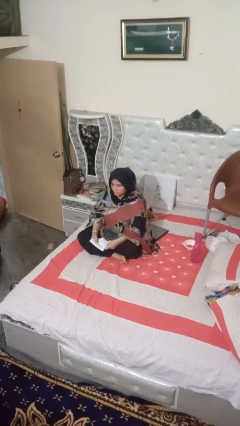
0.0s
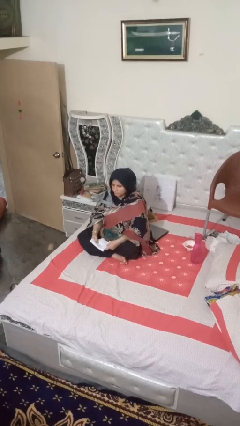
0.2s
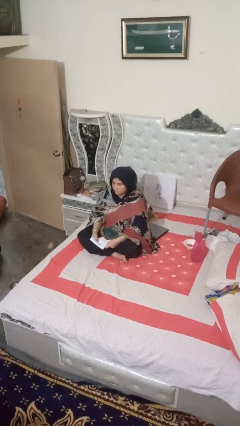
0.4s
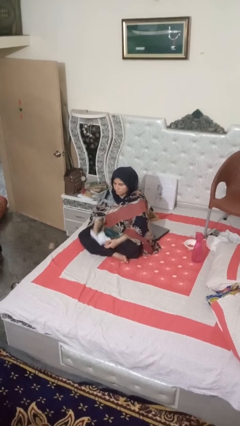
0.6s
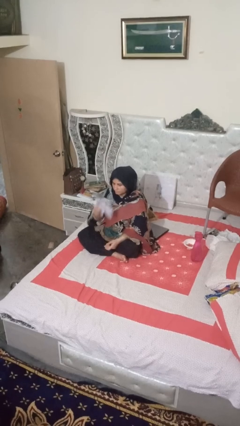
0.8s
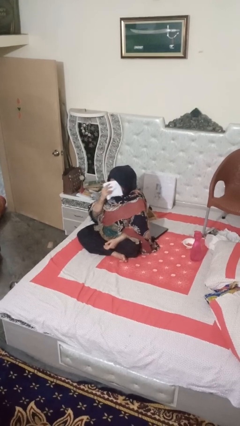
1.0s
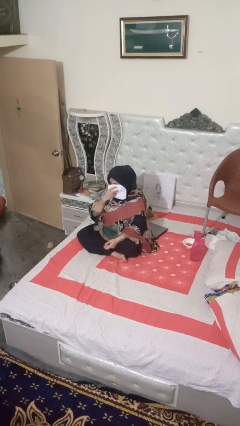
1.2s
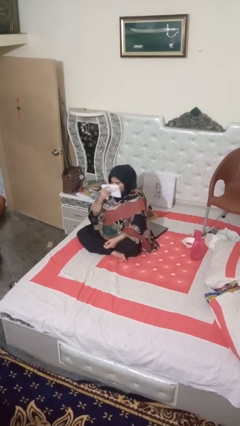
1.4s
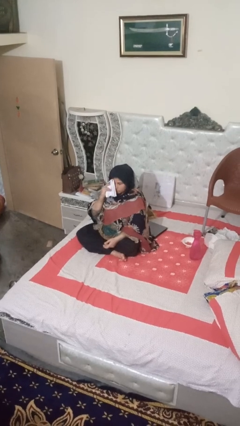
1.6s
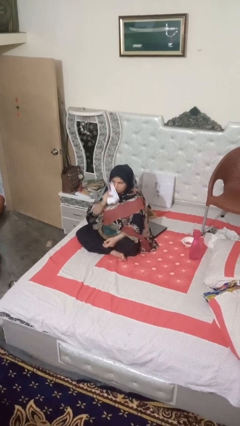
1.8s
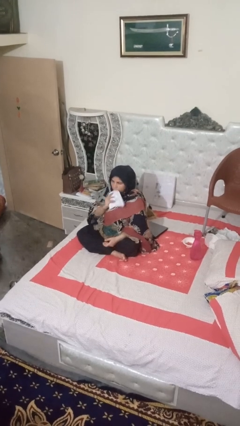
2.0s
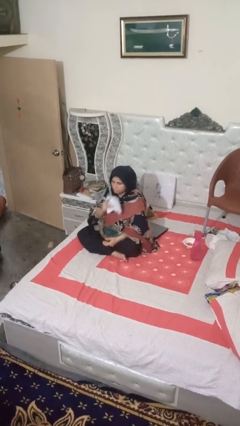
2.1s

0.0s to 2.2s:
person wipes mouth with napkin

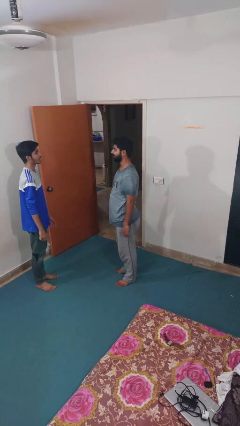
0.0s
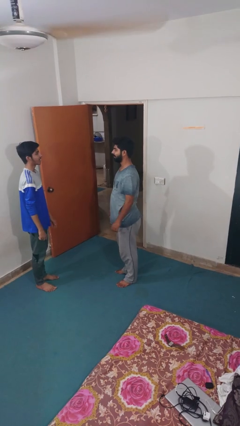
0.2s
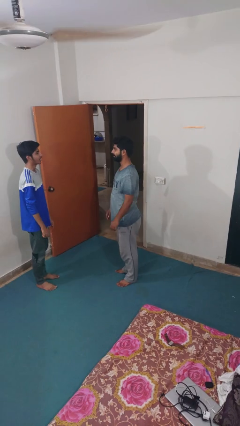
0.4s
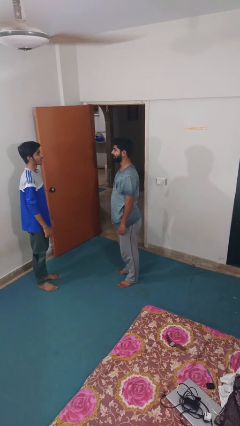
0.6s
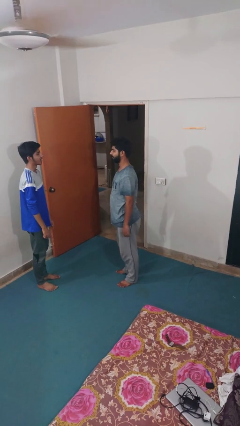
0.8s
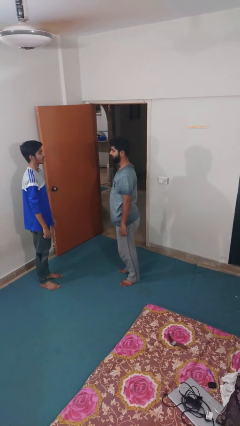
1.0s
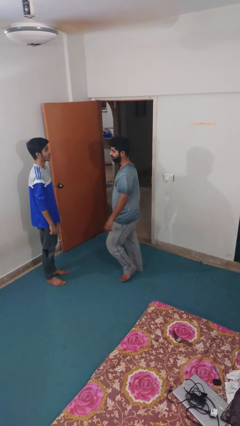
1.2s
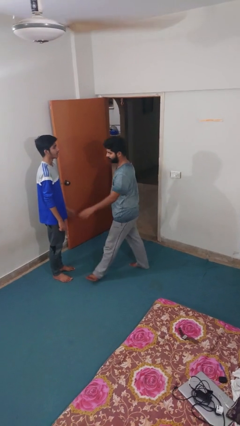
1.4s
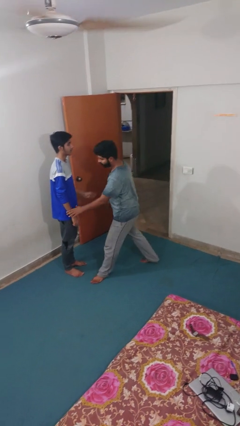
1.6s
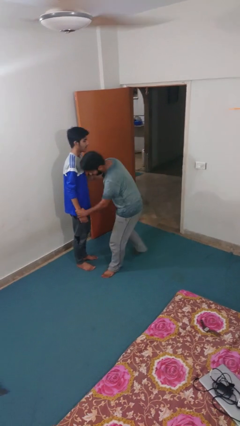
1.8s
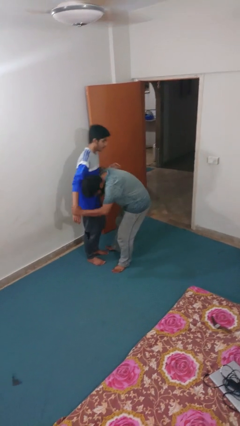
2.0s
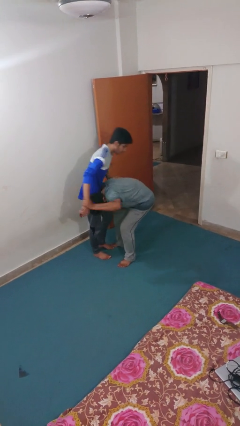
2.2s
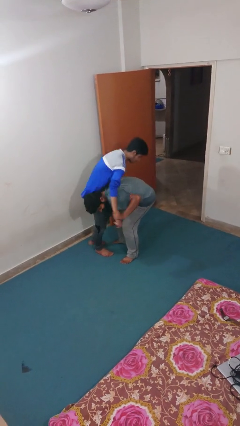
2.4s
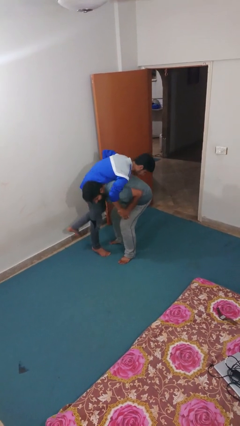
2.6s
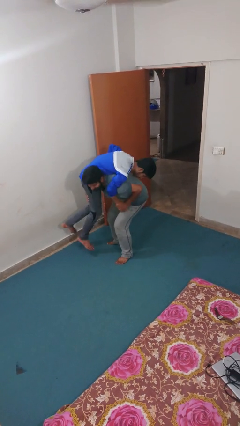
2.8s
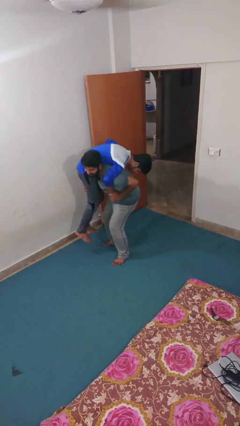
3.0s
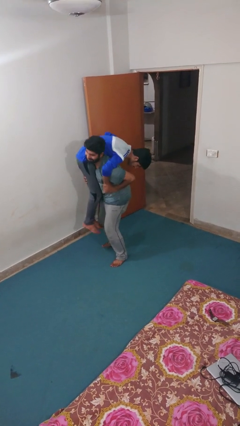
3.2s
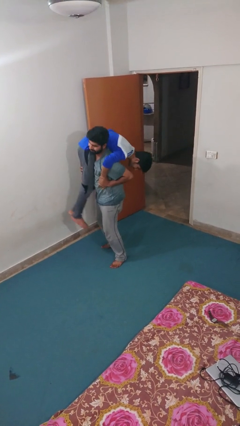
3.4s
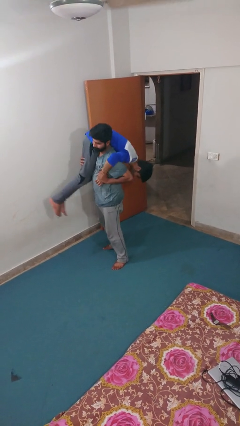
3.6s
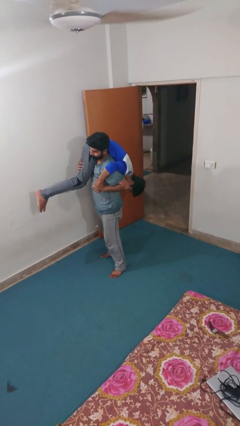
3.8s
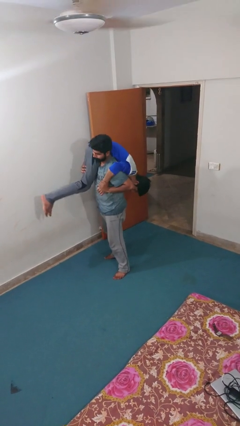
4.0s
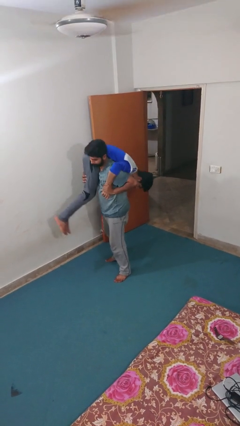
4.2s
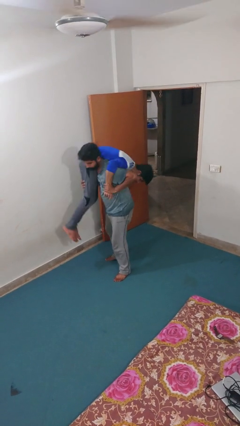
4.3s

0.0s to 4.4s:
person carries person over shoulder

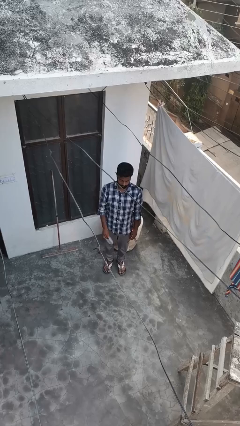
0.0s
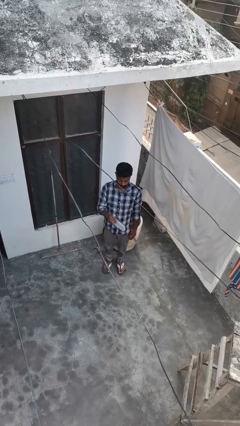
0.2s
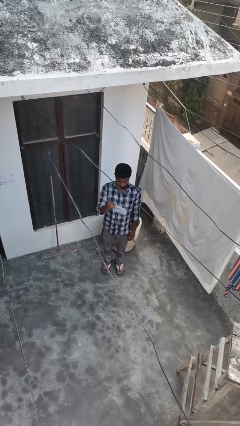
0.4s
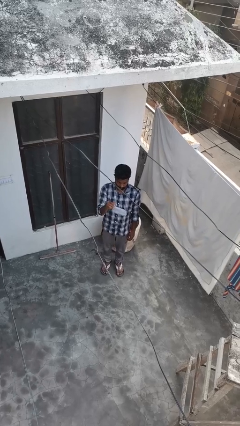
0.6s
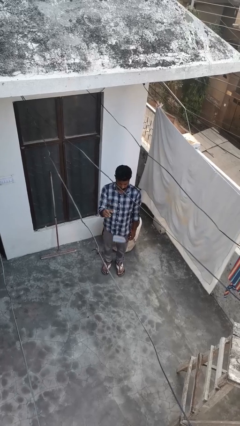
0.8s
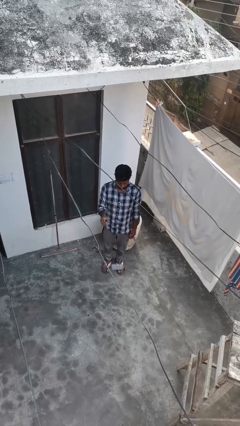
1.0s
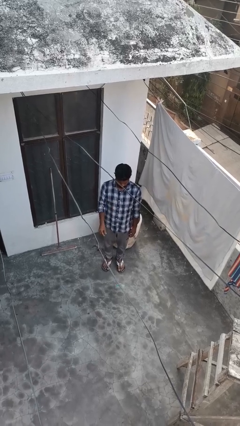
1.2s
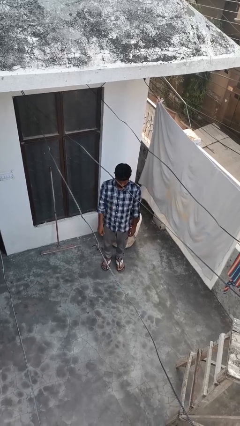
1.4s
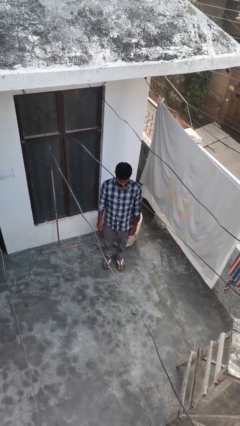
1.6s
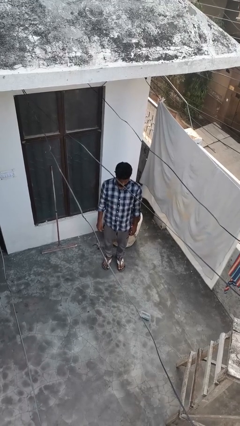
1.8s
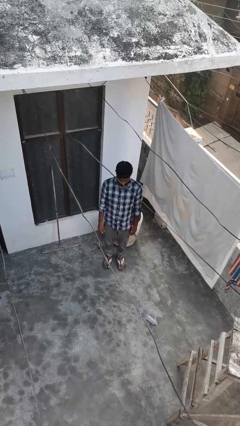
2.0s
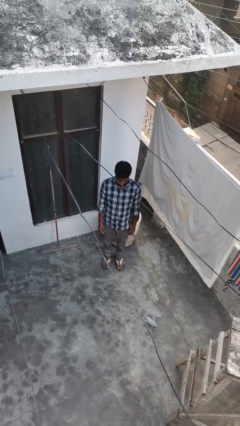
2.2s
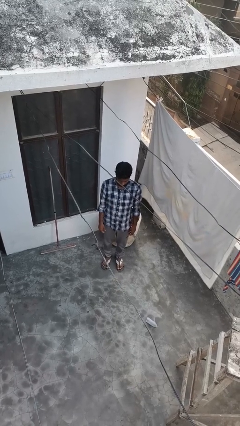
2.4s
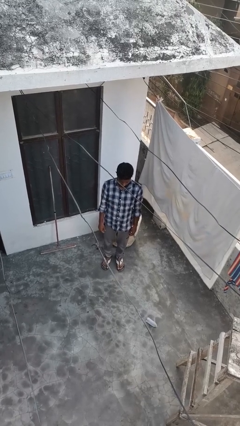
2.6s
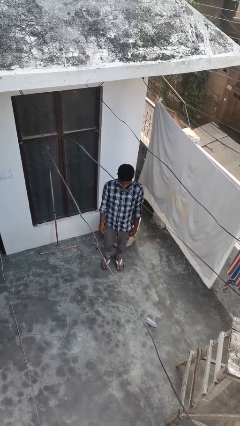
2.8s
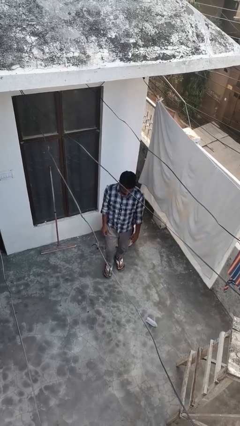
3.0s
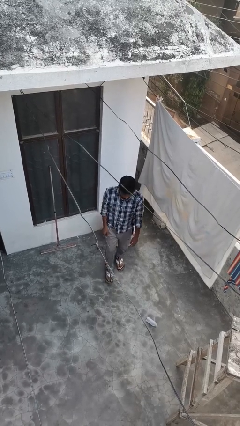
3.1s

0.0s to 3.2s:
person throws object into air

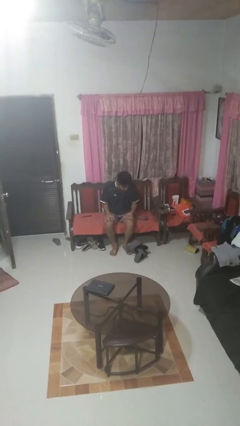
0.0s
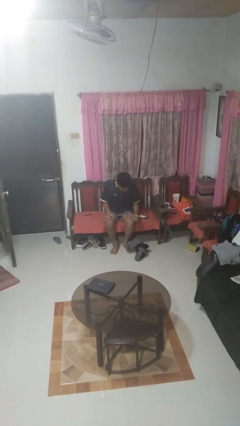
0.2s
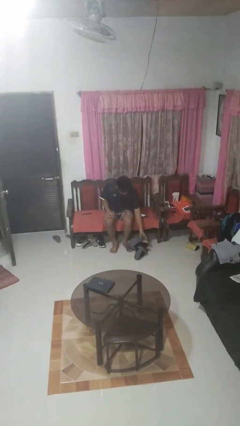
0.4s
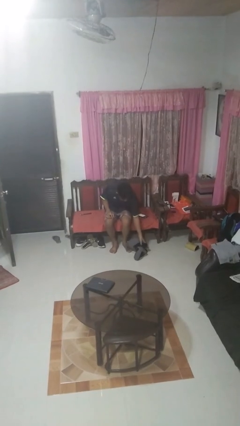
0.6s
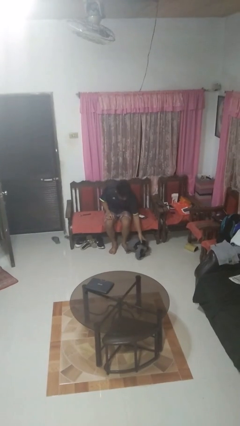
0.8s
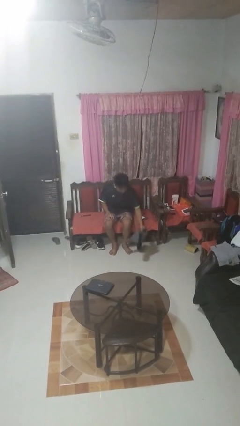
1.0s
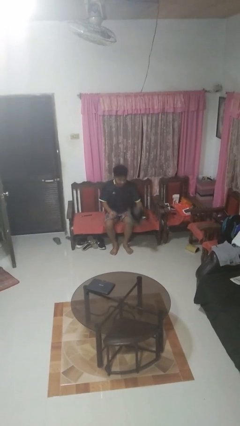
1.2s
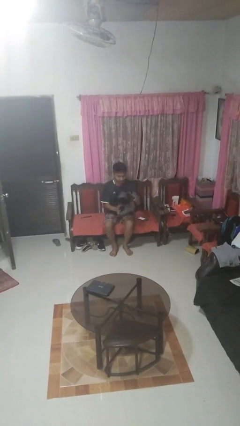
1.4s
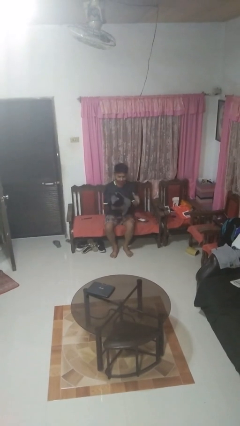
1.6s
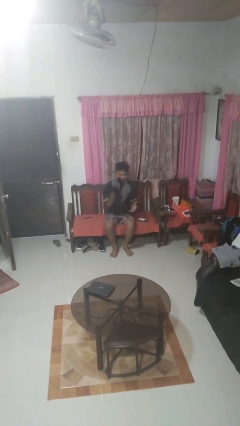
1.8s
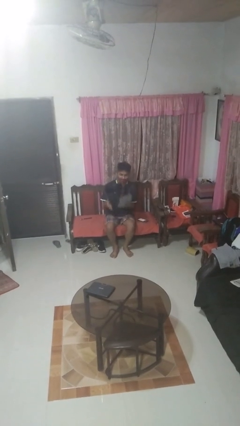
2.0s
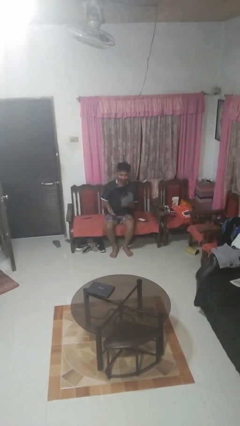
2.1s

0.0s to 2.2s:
person picks up object from floor

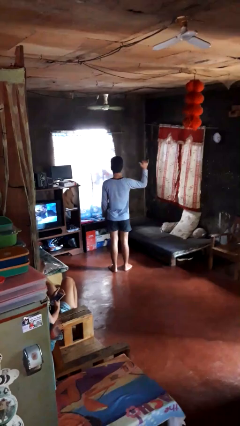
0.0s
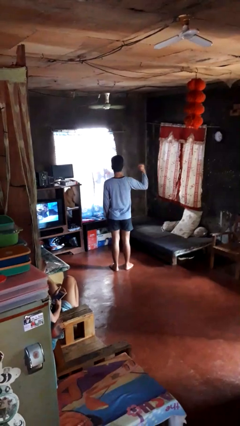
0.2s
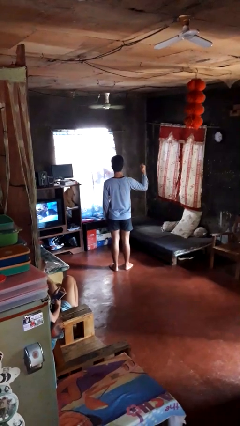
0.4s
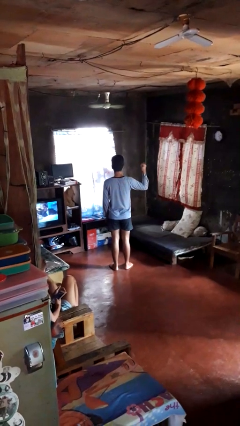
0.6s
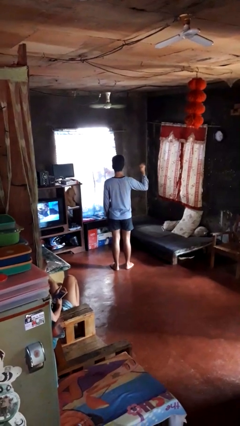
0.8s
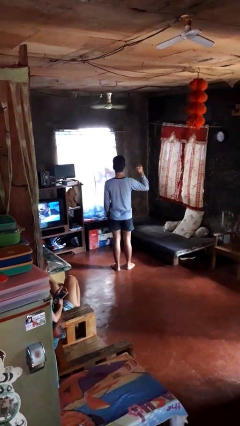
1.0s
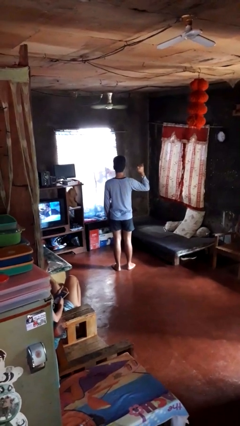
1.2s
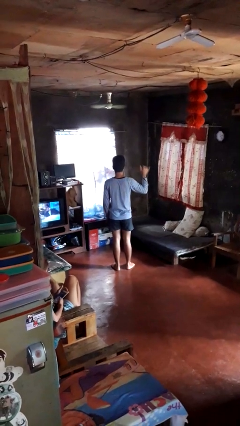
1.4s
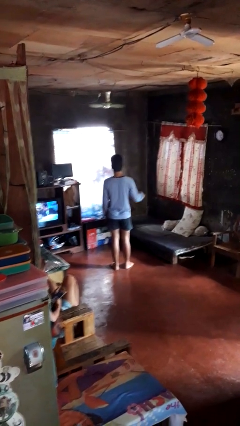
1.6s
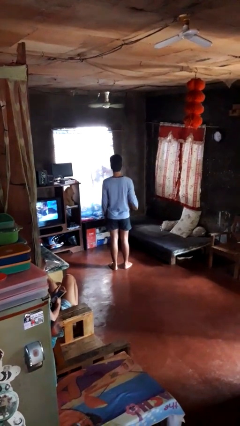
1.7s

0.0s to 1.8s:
person gestures hang loose

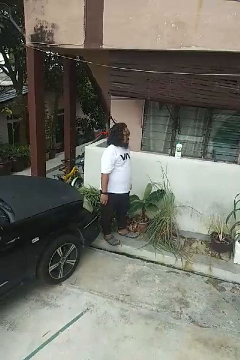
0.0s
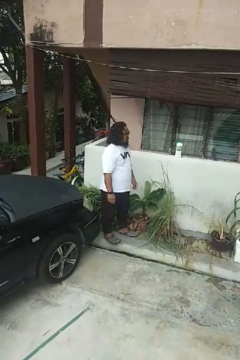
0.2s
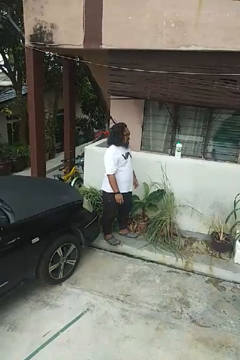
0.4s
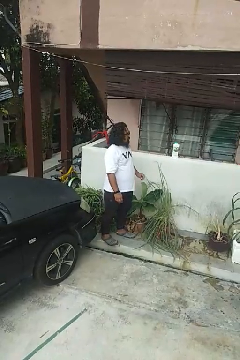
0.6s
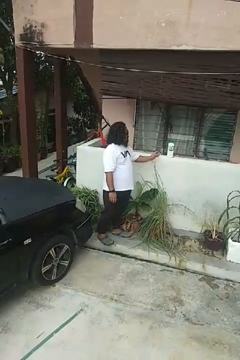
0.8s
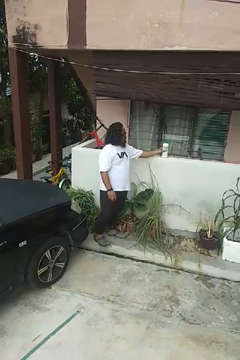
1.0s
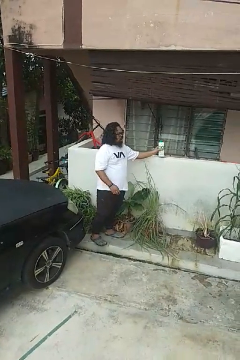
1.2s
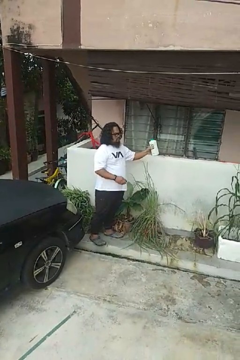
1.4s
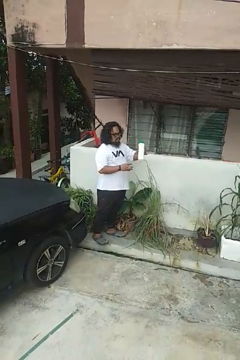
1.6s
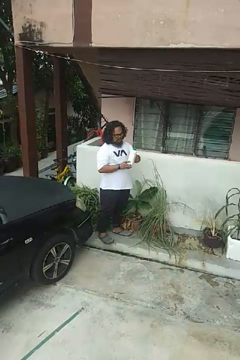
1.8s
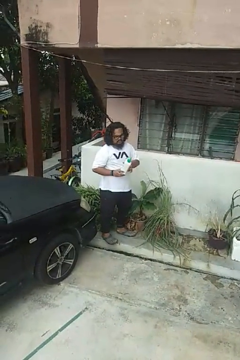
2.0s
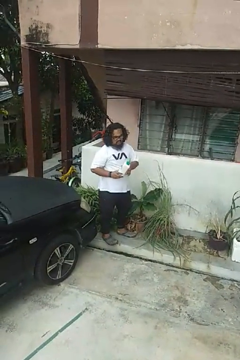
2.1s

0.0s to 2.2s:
person picks up object from countertop

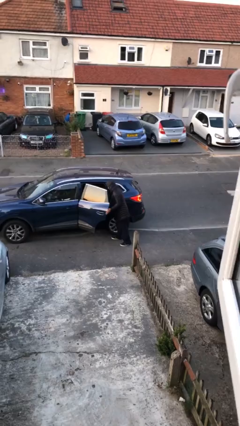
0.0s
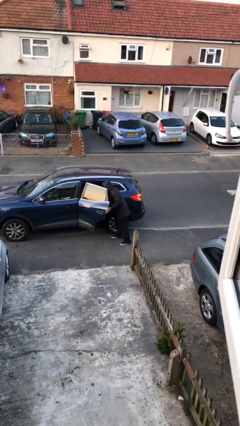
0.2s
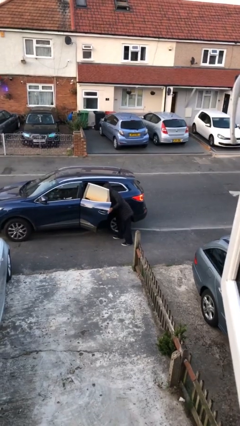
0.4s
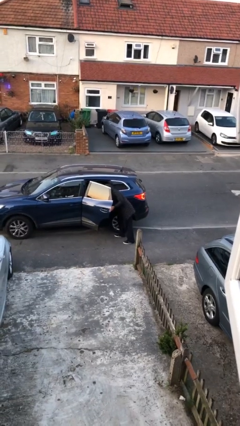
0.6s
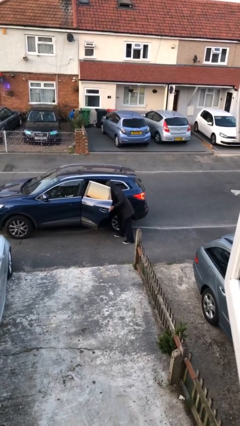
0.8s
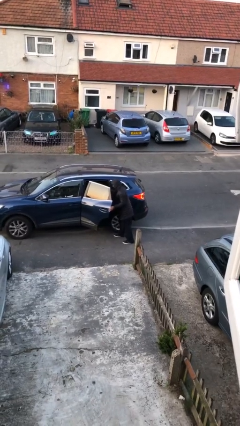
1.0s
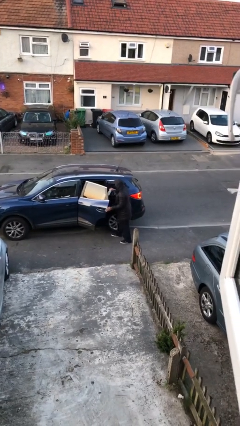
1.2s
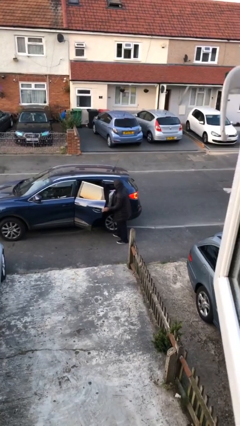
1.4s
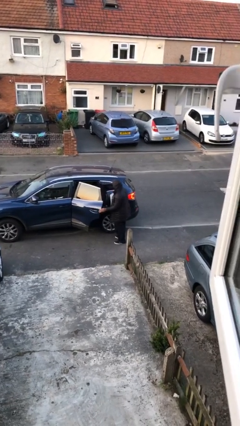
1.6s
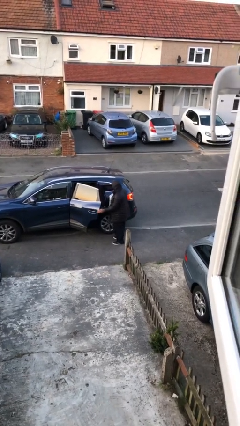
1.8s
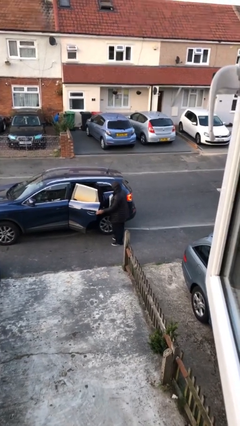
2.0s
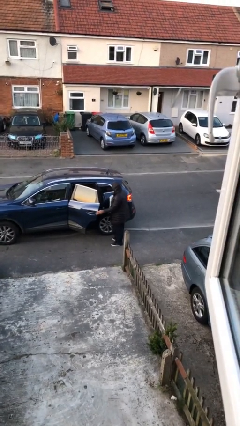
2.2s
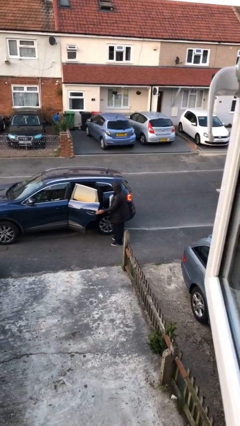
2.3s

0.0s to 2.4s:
person unloads car
